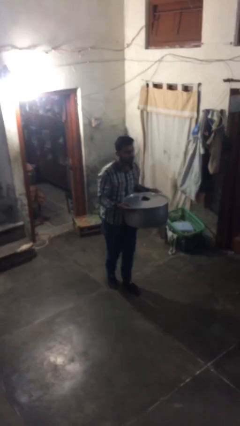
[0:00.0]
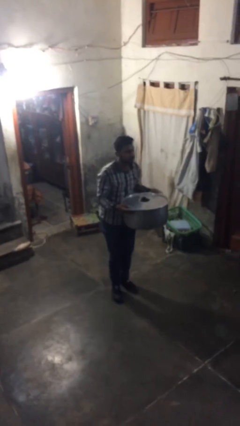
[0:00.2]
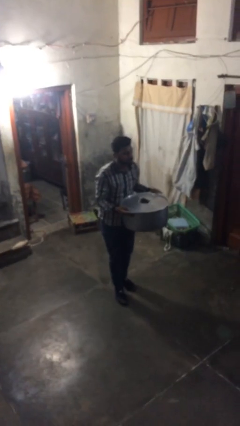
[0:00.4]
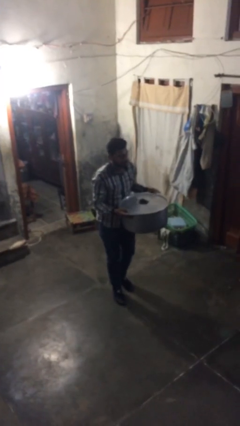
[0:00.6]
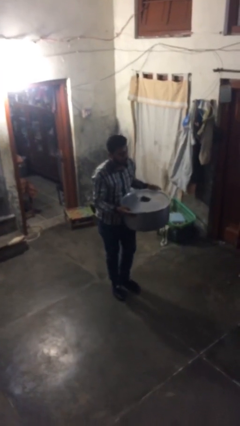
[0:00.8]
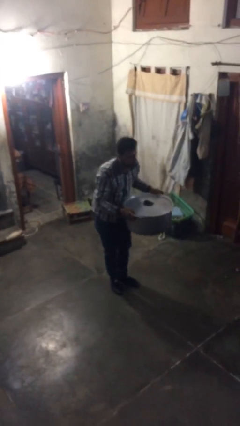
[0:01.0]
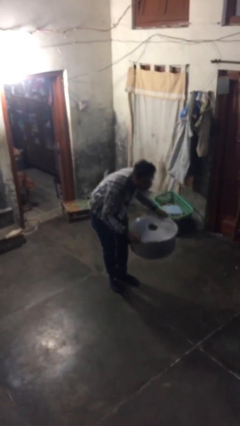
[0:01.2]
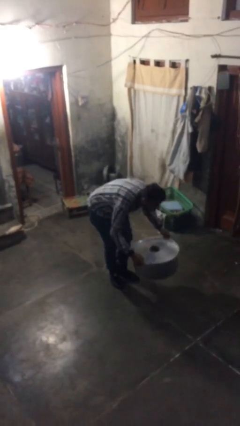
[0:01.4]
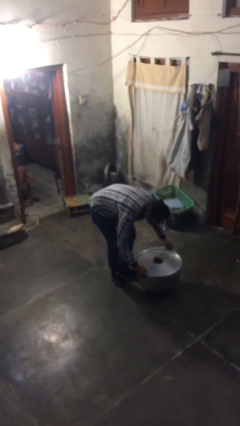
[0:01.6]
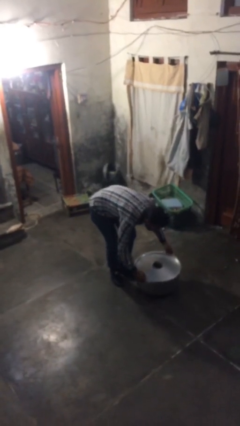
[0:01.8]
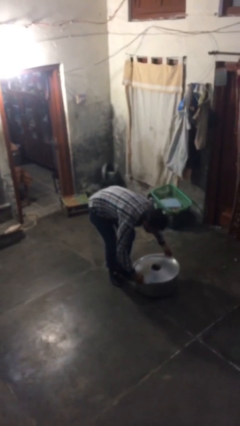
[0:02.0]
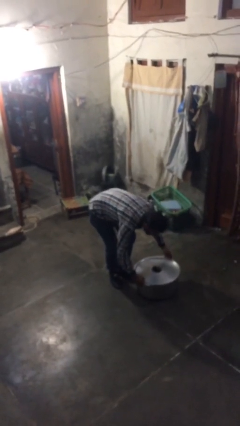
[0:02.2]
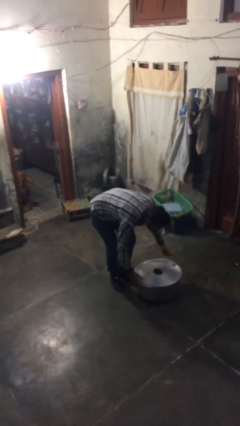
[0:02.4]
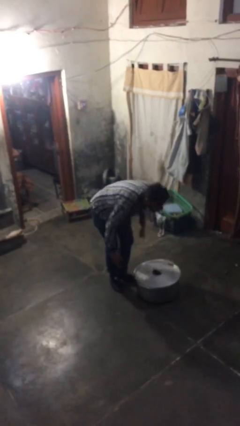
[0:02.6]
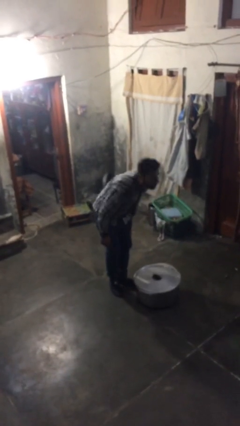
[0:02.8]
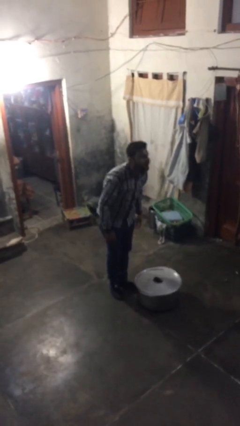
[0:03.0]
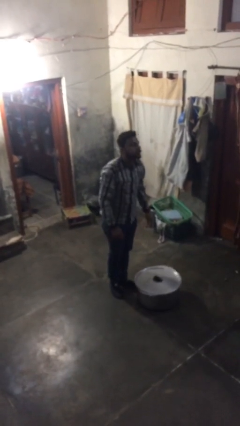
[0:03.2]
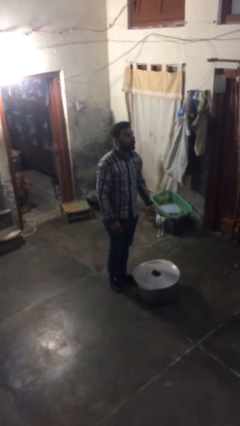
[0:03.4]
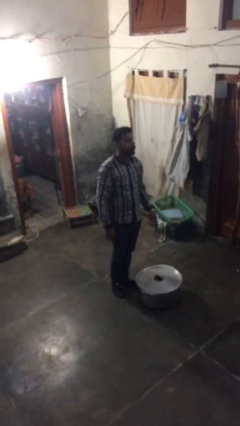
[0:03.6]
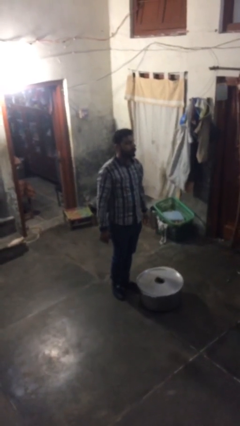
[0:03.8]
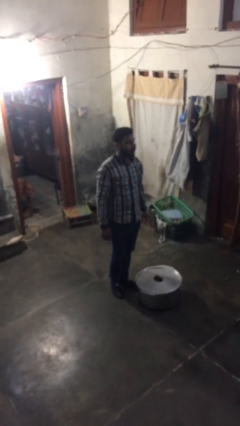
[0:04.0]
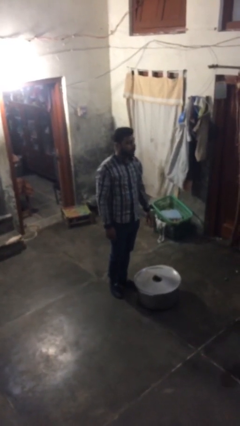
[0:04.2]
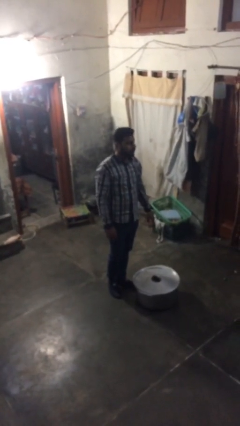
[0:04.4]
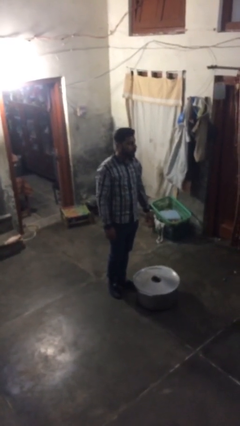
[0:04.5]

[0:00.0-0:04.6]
person puts down object on floor

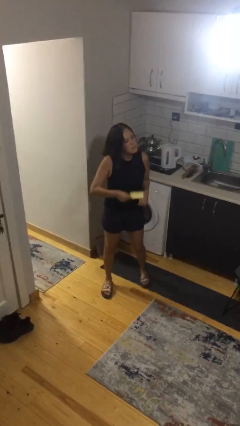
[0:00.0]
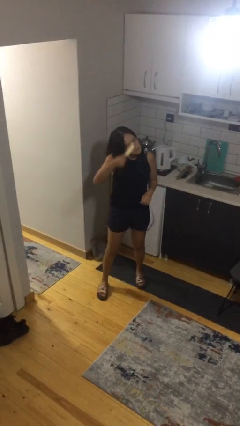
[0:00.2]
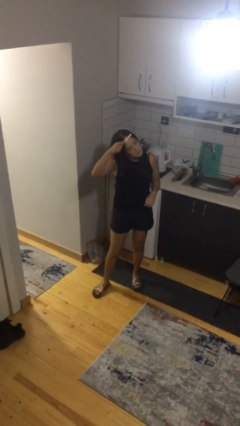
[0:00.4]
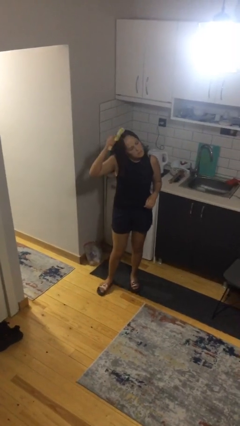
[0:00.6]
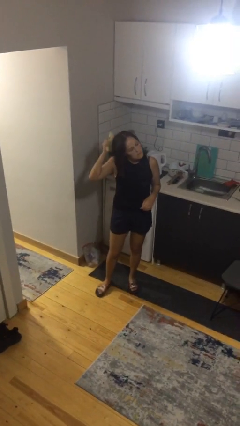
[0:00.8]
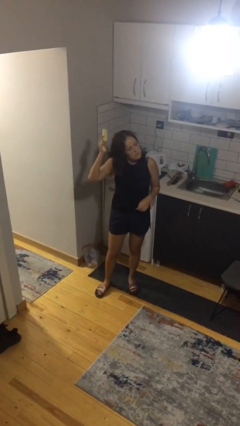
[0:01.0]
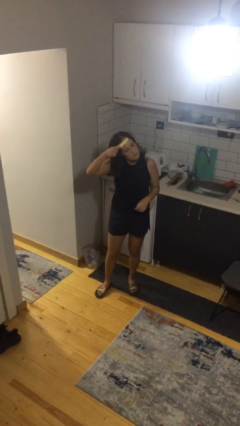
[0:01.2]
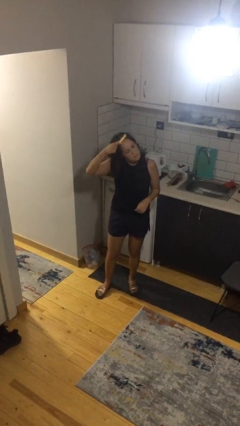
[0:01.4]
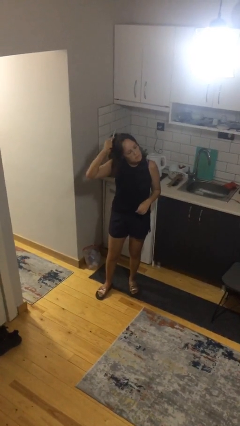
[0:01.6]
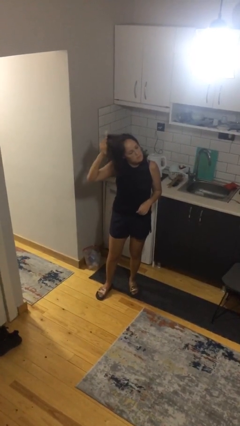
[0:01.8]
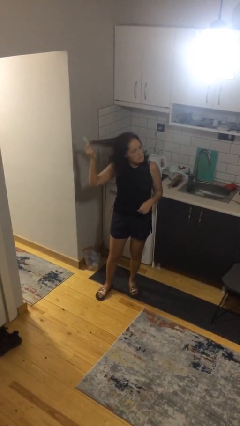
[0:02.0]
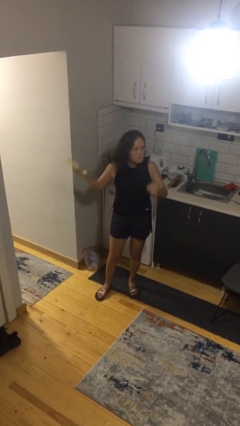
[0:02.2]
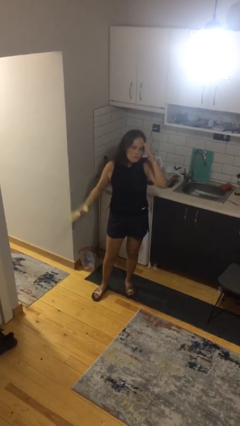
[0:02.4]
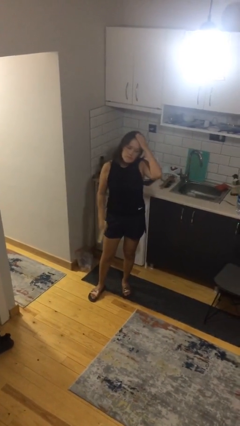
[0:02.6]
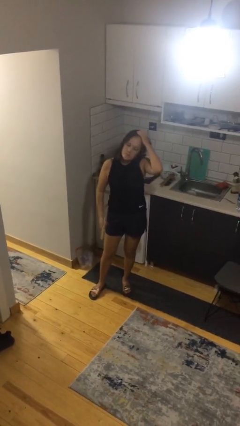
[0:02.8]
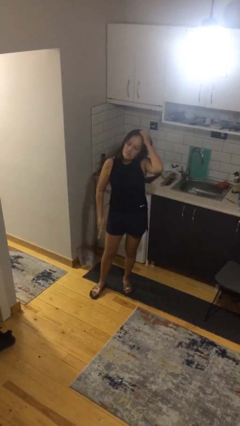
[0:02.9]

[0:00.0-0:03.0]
person brushes hair

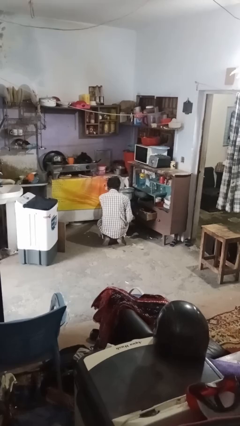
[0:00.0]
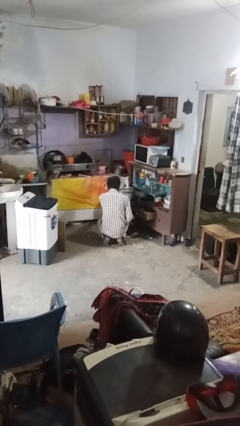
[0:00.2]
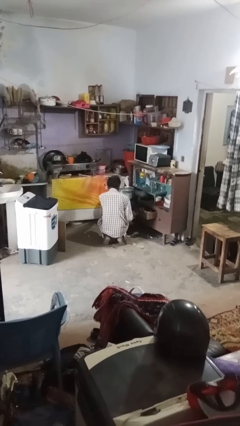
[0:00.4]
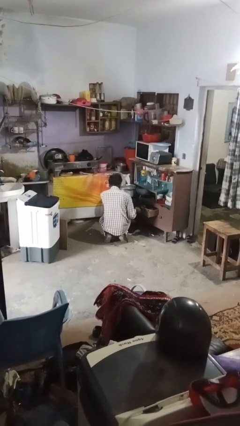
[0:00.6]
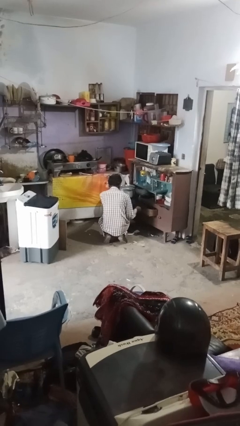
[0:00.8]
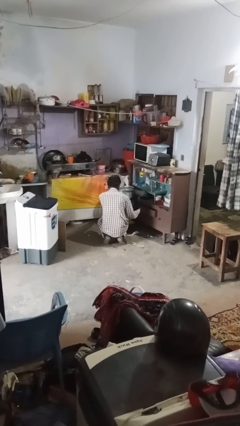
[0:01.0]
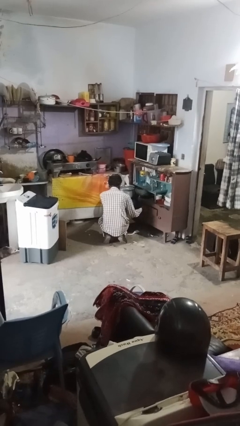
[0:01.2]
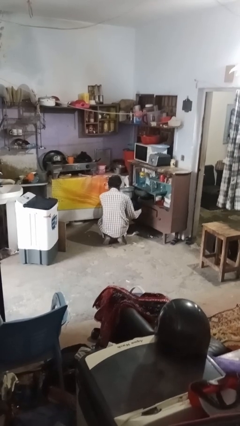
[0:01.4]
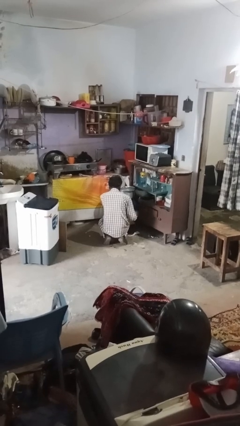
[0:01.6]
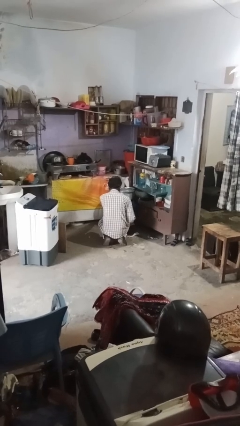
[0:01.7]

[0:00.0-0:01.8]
person closes kitchen drawer

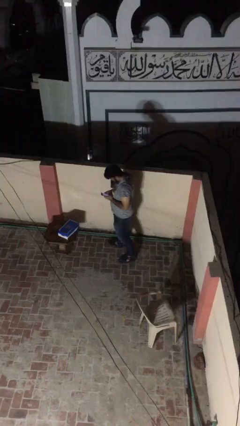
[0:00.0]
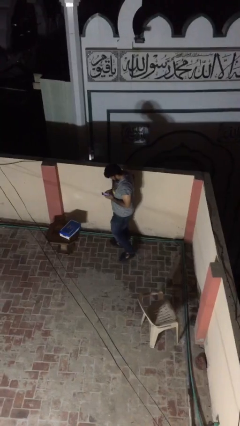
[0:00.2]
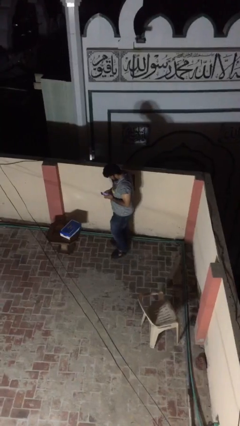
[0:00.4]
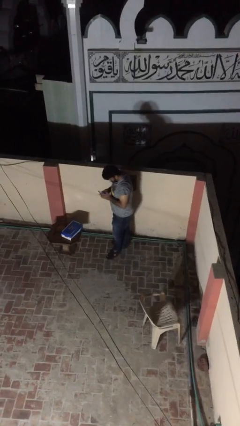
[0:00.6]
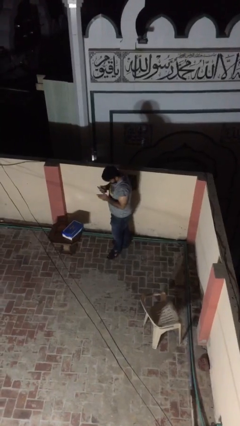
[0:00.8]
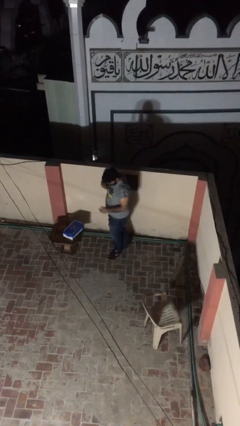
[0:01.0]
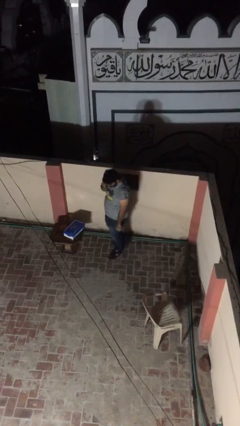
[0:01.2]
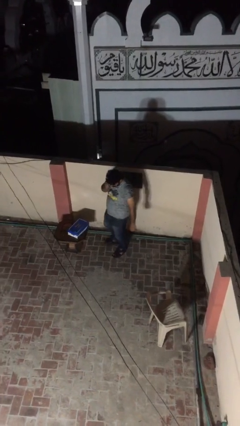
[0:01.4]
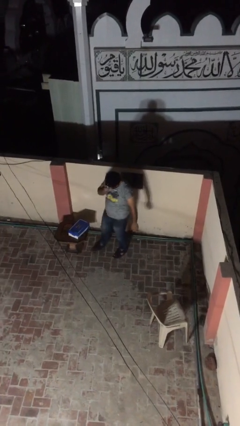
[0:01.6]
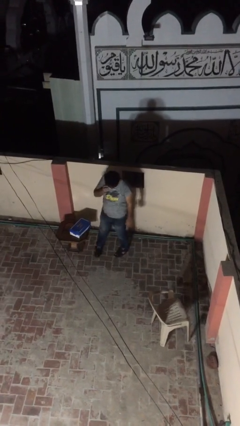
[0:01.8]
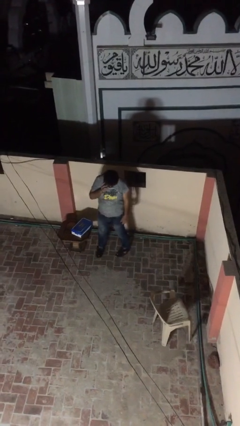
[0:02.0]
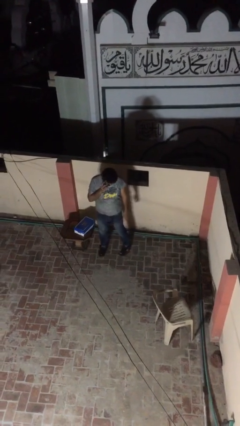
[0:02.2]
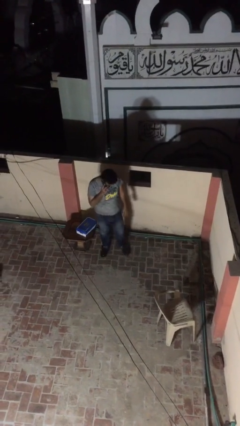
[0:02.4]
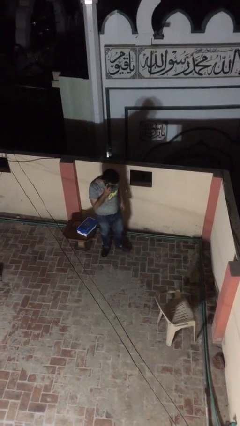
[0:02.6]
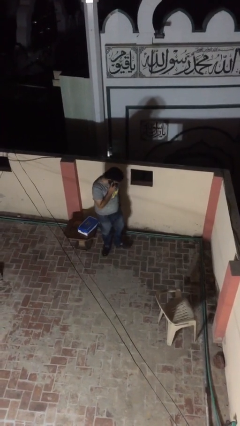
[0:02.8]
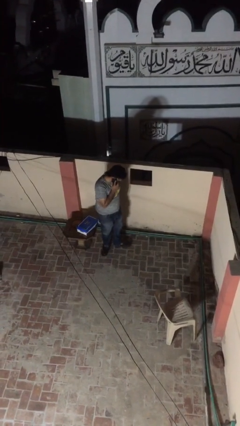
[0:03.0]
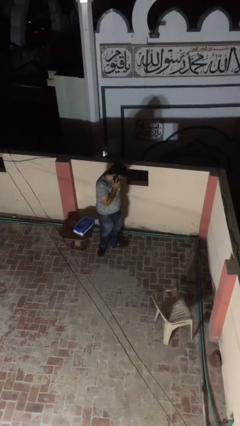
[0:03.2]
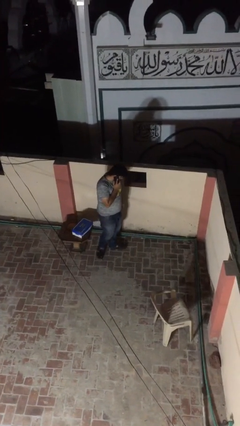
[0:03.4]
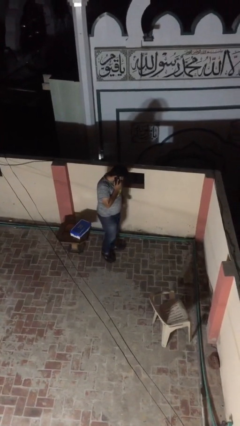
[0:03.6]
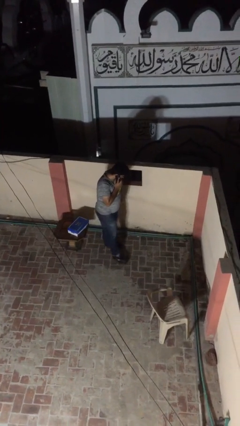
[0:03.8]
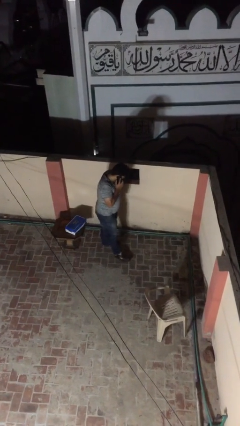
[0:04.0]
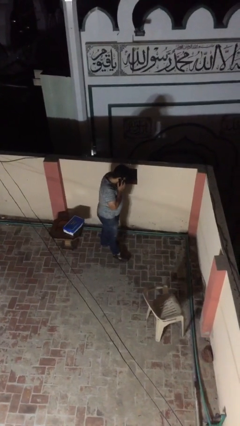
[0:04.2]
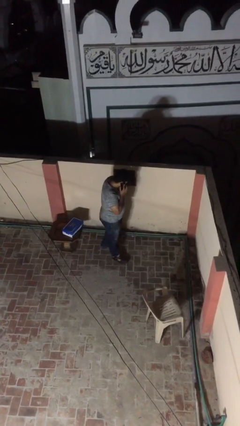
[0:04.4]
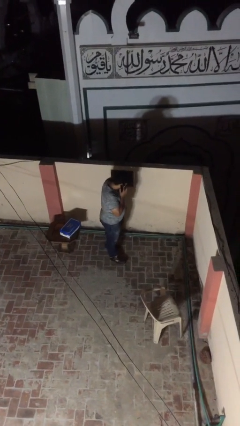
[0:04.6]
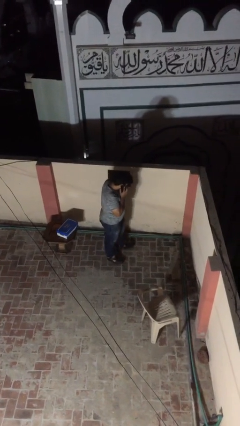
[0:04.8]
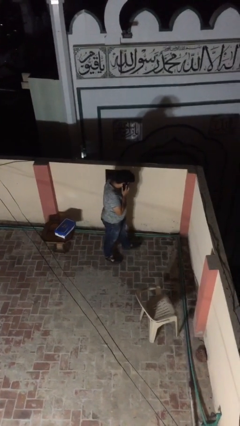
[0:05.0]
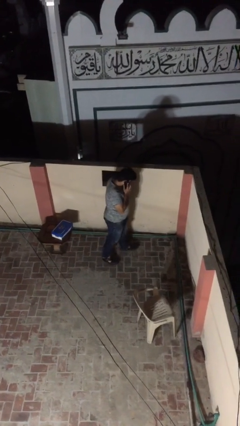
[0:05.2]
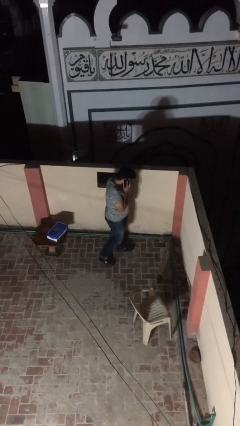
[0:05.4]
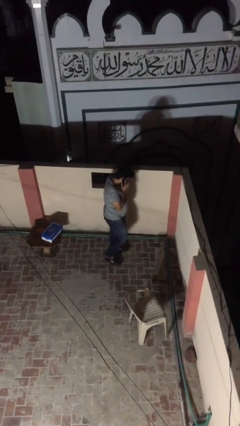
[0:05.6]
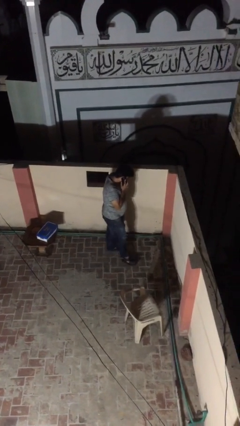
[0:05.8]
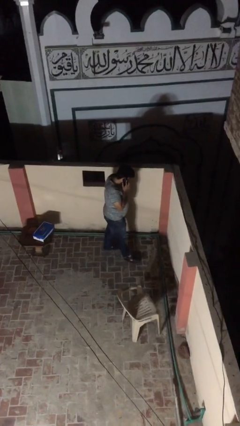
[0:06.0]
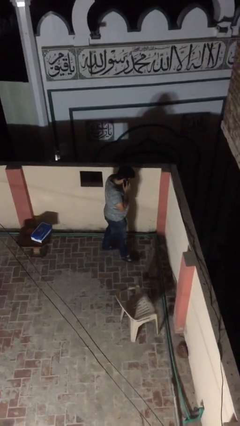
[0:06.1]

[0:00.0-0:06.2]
person talks on phone

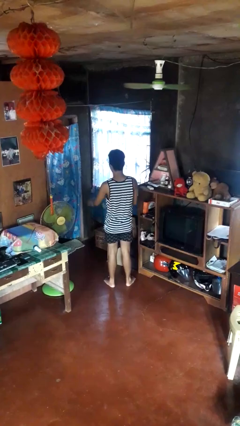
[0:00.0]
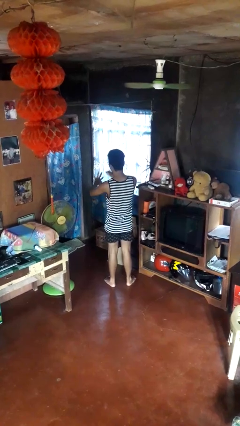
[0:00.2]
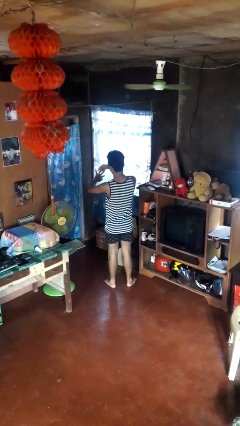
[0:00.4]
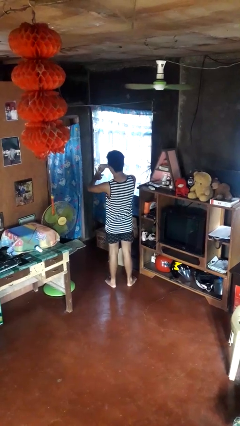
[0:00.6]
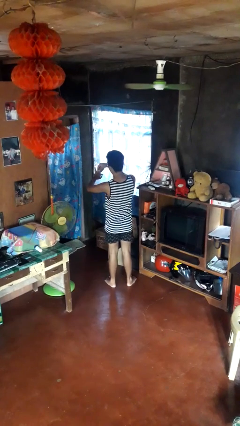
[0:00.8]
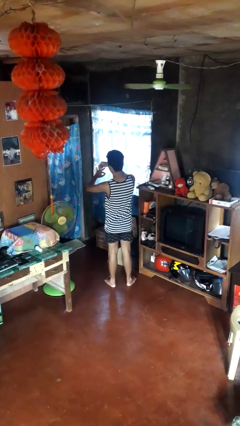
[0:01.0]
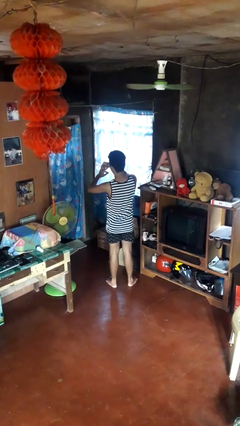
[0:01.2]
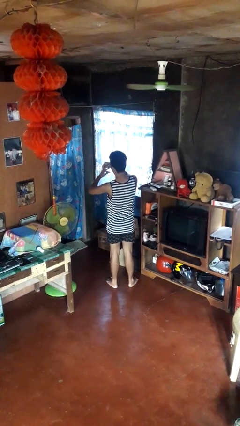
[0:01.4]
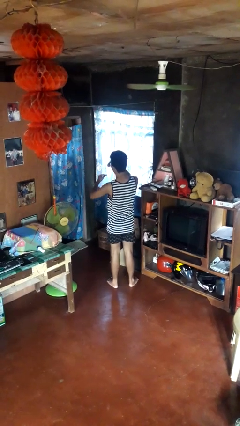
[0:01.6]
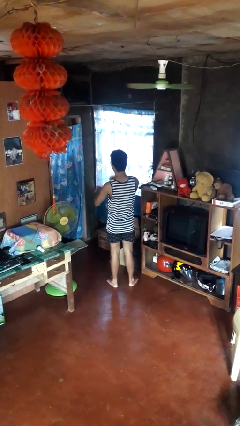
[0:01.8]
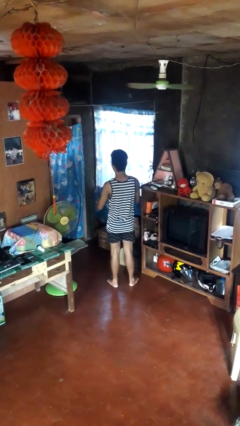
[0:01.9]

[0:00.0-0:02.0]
person takes off ring
